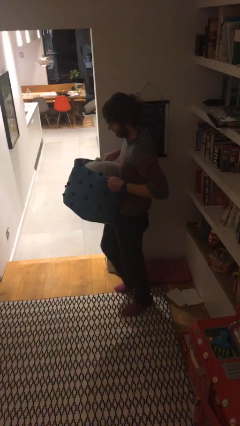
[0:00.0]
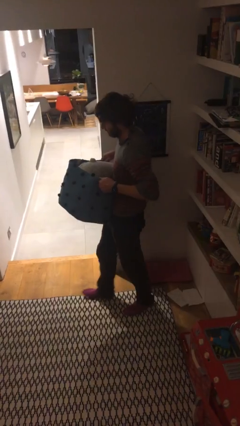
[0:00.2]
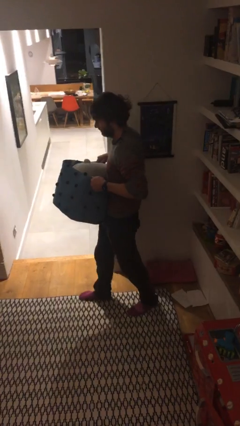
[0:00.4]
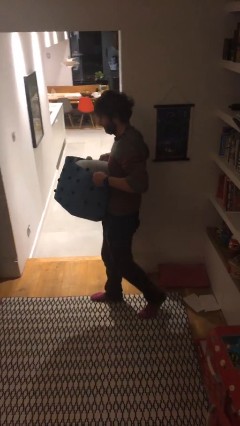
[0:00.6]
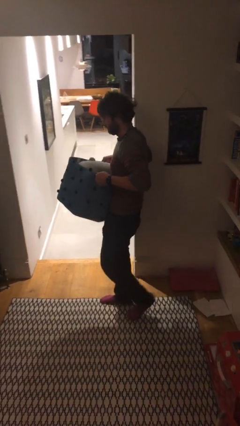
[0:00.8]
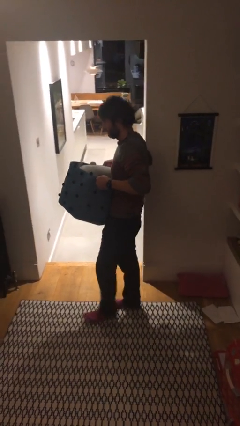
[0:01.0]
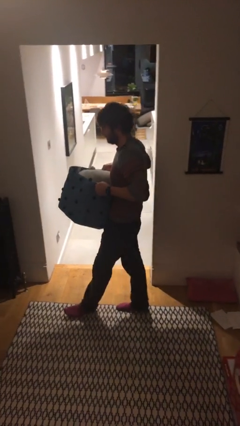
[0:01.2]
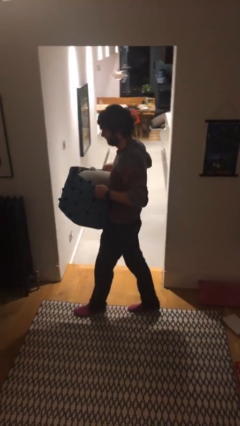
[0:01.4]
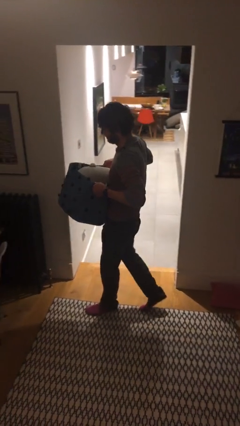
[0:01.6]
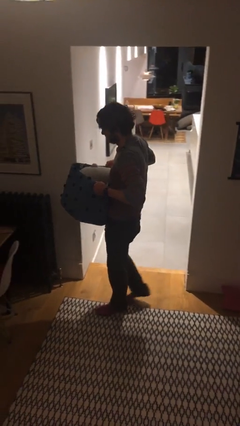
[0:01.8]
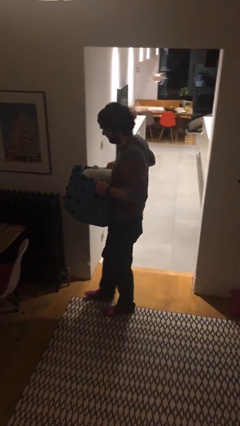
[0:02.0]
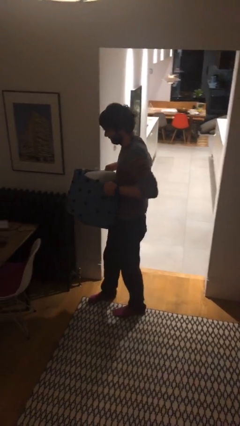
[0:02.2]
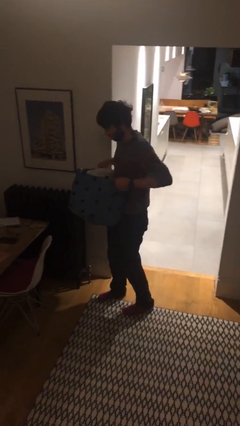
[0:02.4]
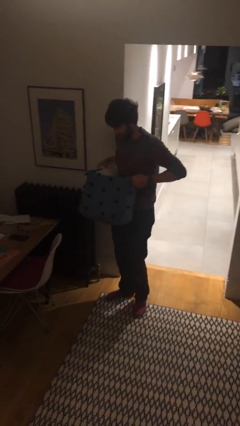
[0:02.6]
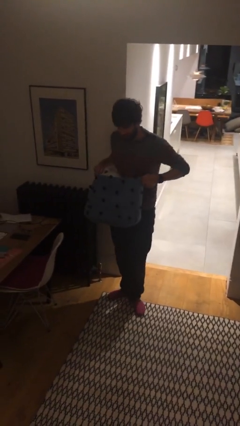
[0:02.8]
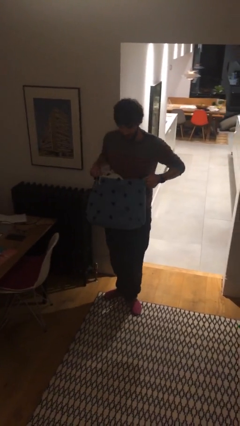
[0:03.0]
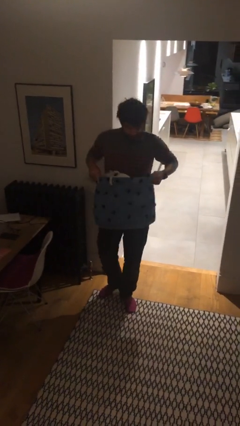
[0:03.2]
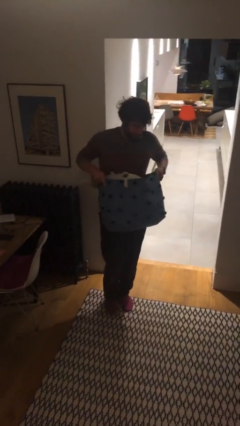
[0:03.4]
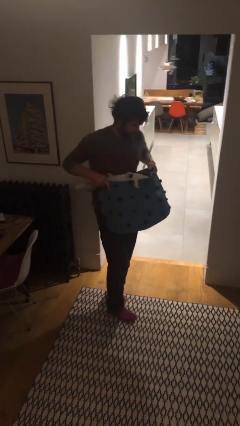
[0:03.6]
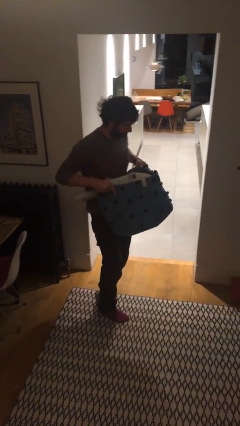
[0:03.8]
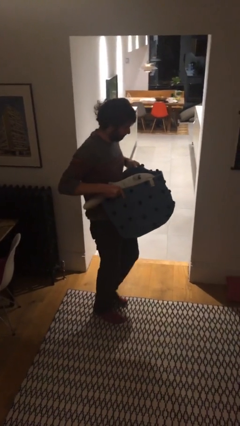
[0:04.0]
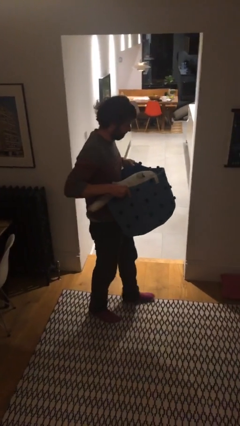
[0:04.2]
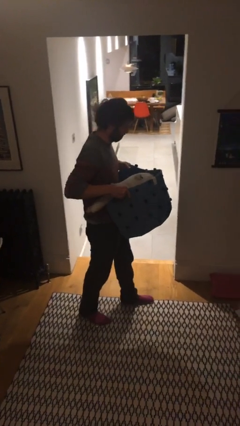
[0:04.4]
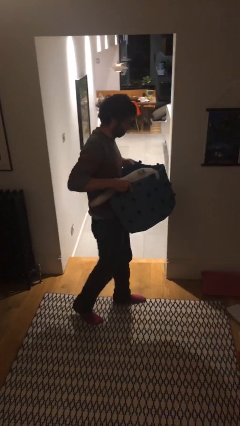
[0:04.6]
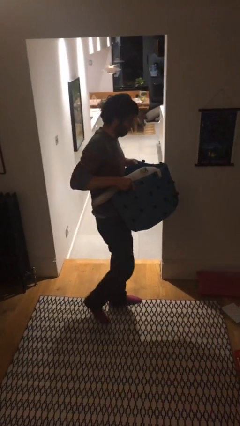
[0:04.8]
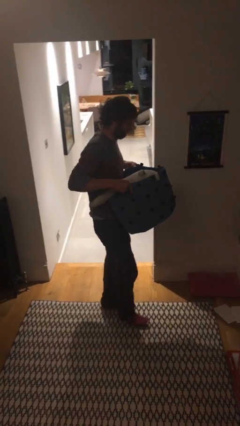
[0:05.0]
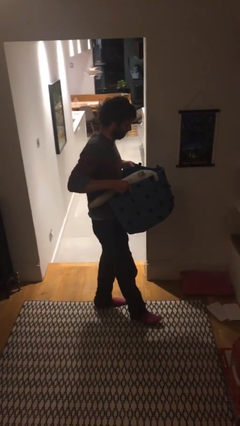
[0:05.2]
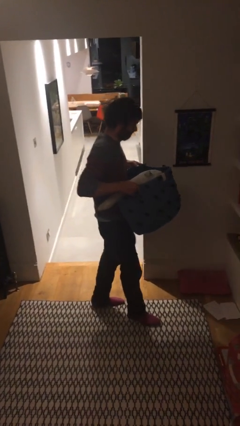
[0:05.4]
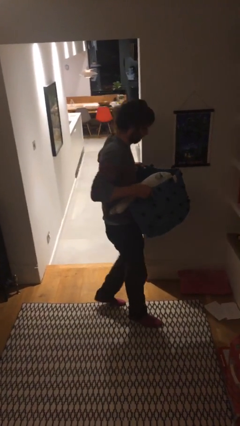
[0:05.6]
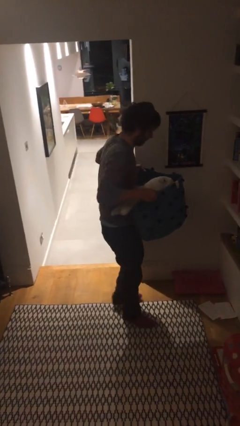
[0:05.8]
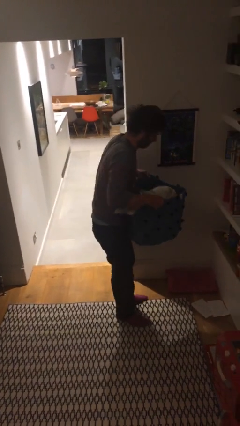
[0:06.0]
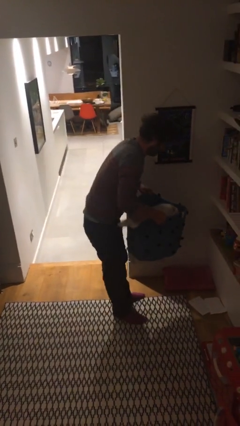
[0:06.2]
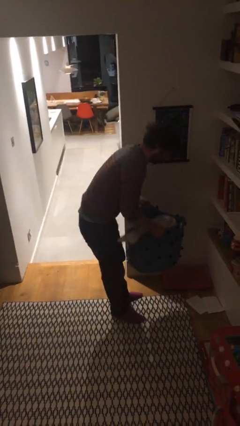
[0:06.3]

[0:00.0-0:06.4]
person carries heavy object

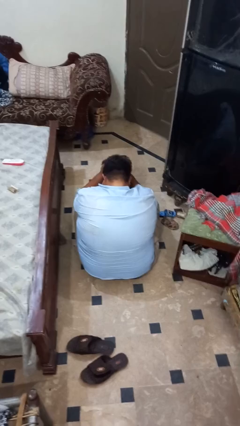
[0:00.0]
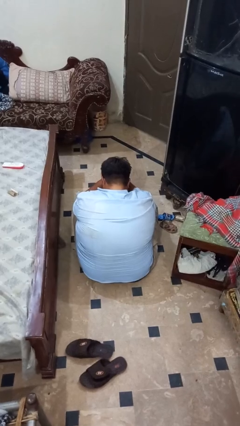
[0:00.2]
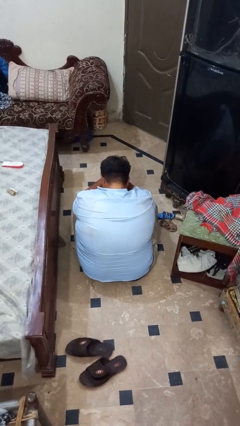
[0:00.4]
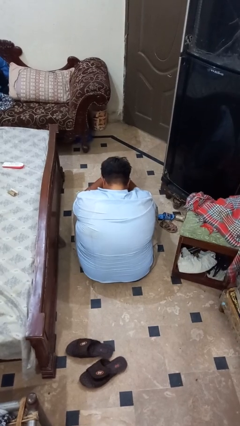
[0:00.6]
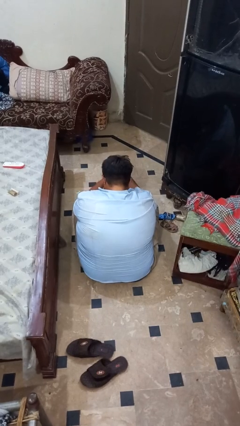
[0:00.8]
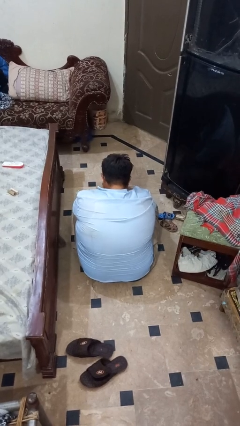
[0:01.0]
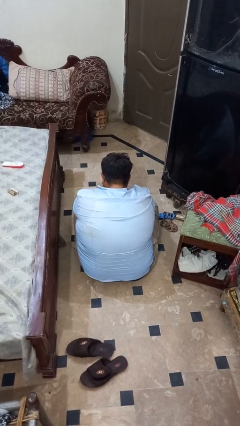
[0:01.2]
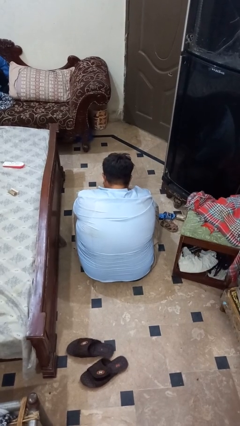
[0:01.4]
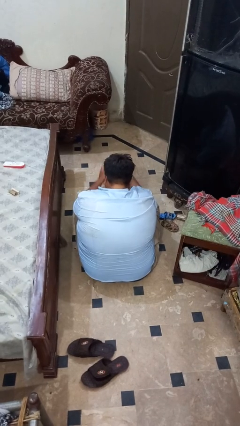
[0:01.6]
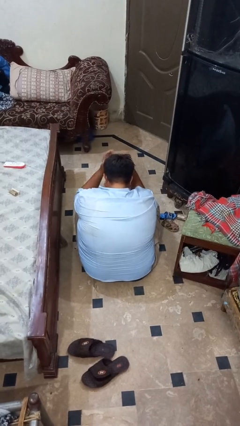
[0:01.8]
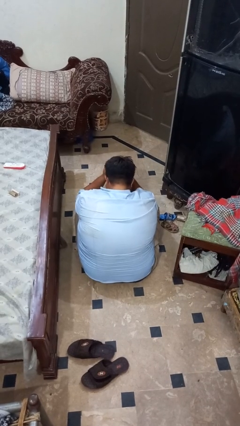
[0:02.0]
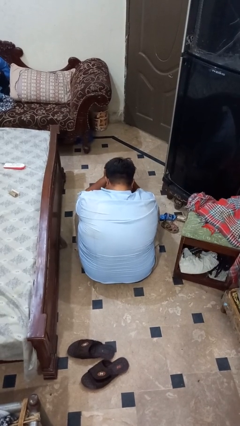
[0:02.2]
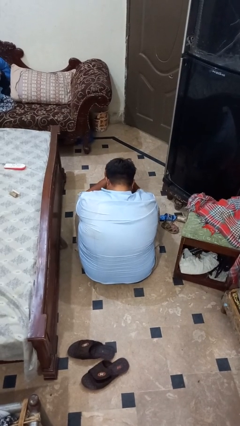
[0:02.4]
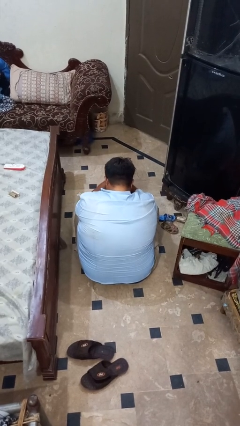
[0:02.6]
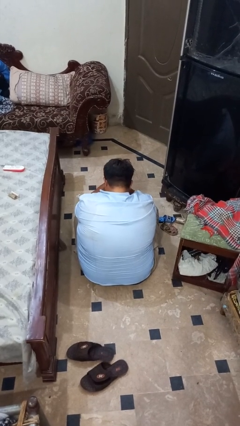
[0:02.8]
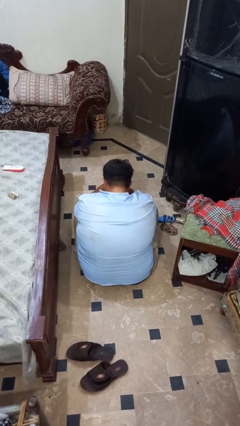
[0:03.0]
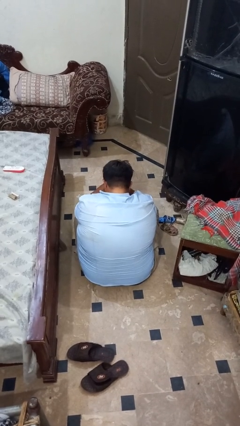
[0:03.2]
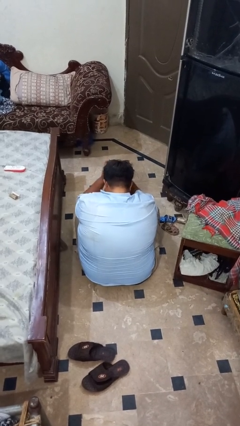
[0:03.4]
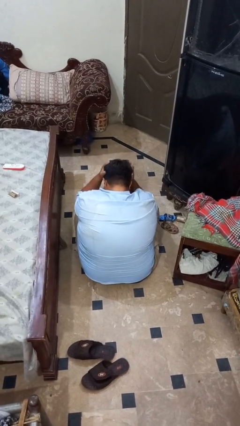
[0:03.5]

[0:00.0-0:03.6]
person strokes hair

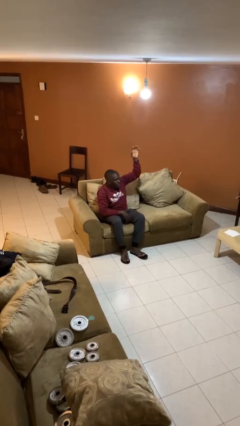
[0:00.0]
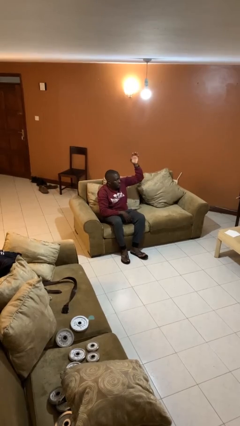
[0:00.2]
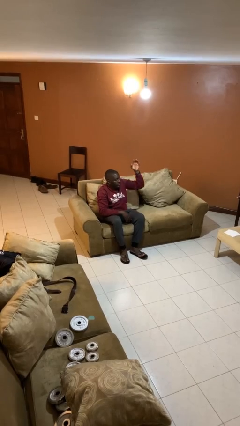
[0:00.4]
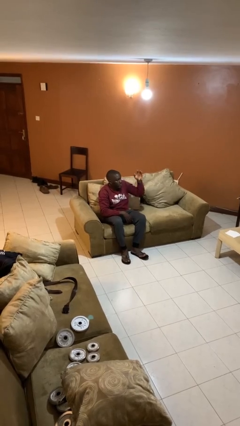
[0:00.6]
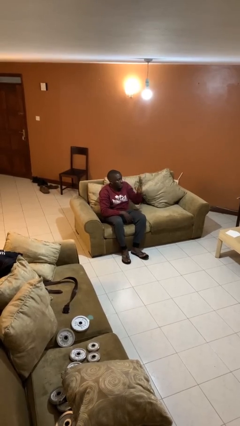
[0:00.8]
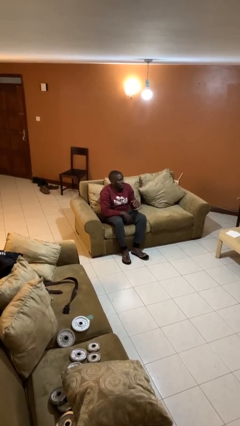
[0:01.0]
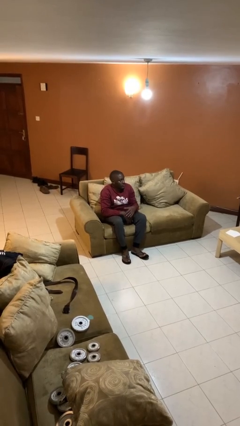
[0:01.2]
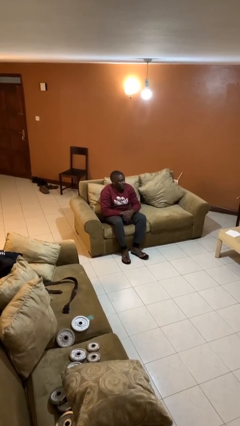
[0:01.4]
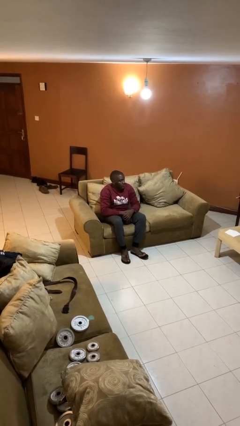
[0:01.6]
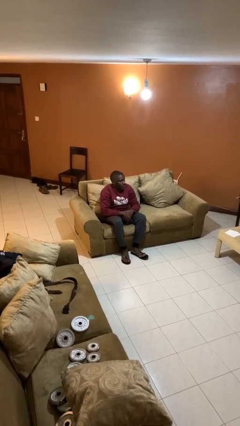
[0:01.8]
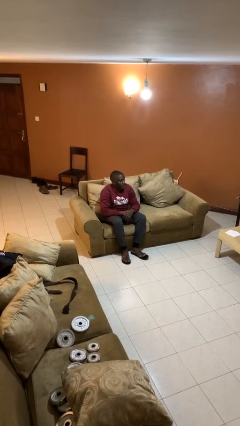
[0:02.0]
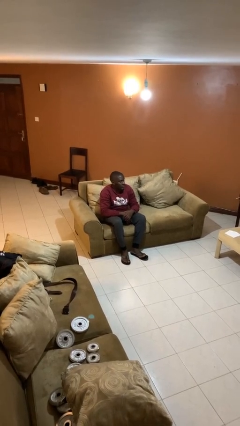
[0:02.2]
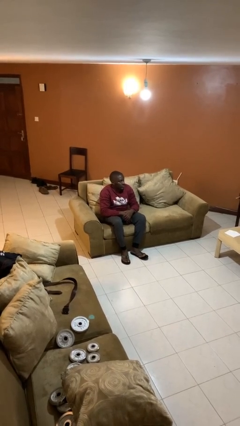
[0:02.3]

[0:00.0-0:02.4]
person gestures lower hand

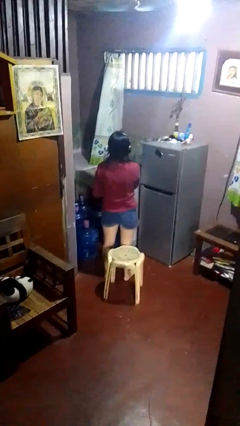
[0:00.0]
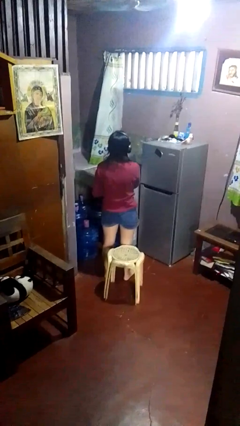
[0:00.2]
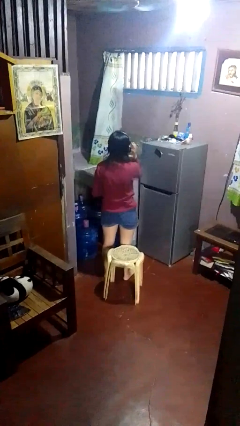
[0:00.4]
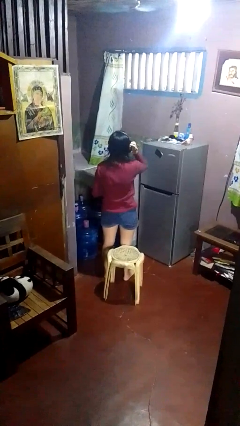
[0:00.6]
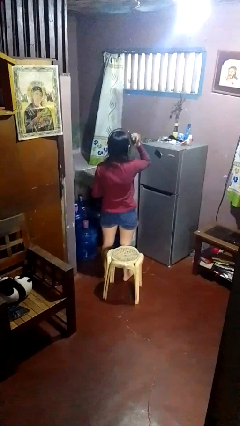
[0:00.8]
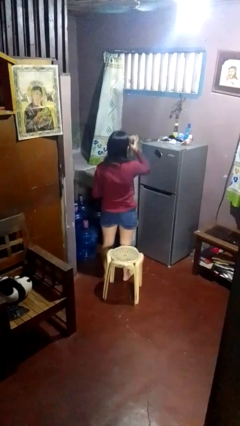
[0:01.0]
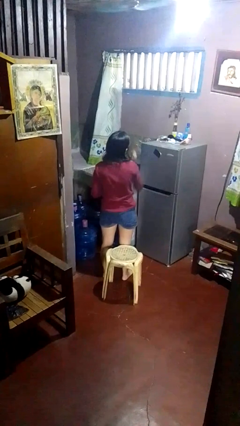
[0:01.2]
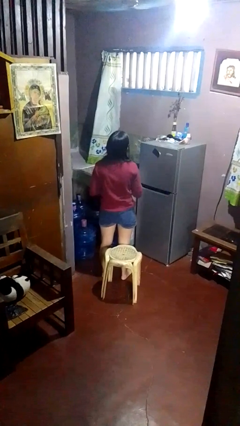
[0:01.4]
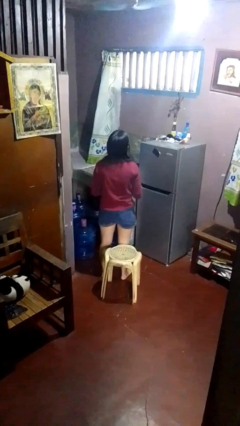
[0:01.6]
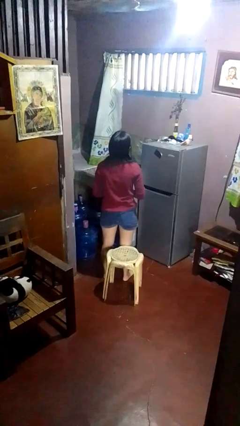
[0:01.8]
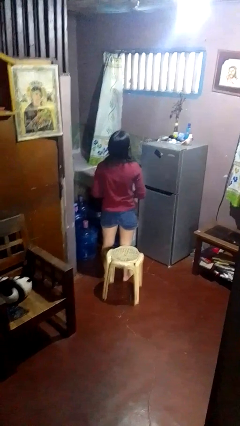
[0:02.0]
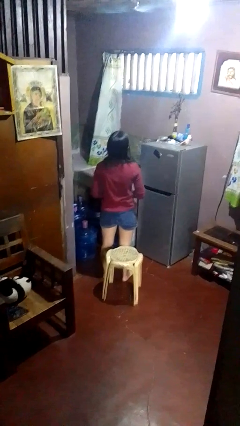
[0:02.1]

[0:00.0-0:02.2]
person takes off headphones

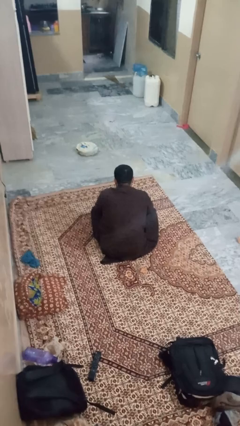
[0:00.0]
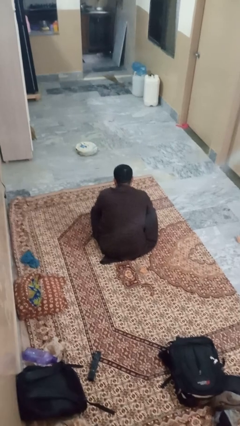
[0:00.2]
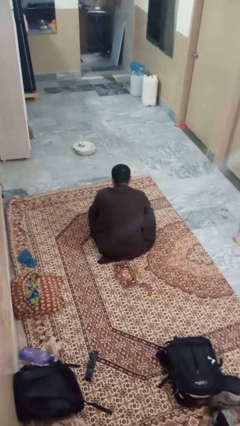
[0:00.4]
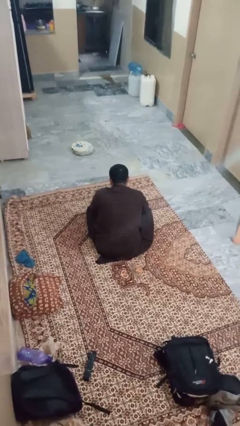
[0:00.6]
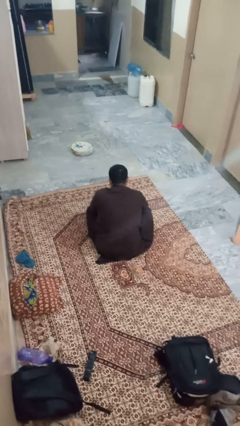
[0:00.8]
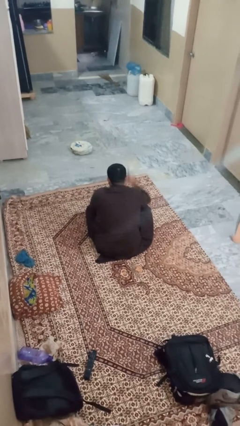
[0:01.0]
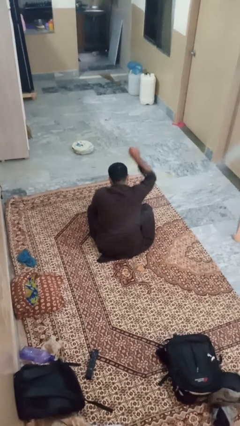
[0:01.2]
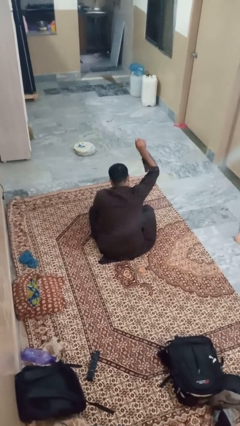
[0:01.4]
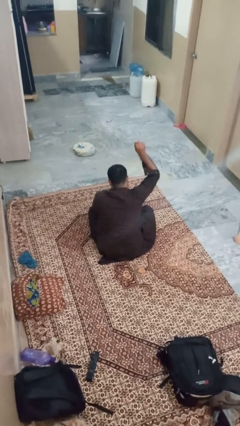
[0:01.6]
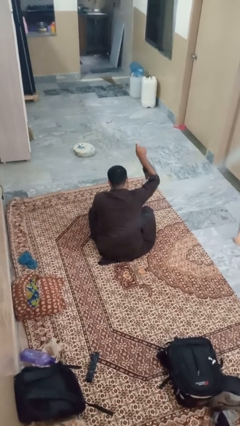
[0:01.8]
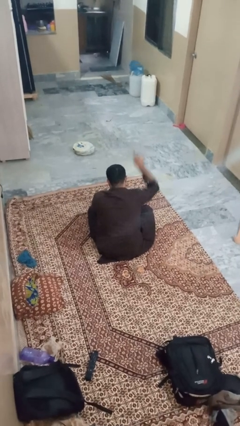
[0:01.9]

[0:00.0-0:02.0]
person gestures number one

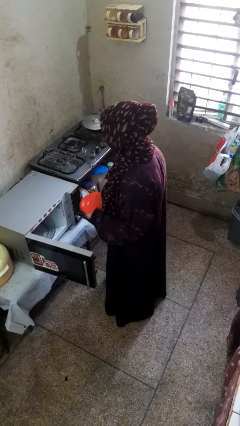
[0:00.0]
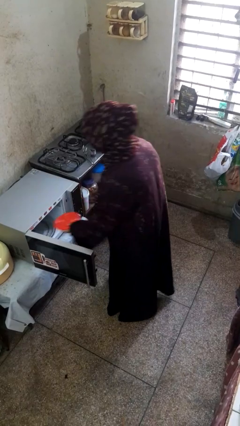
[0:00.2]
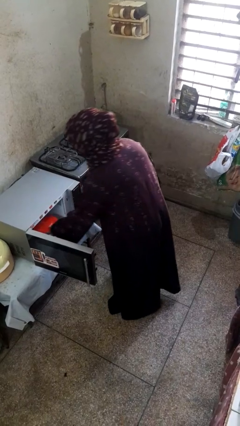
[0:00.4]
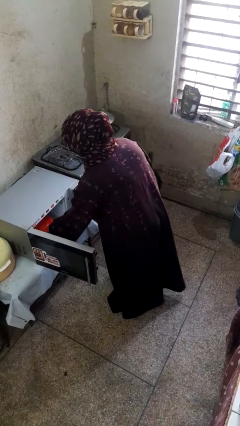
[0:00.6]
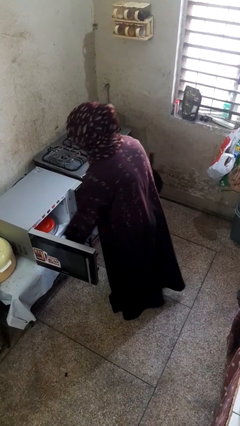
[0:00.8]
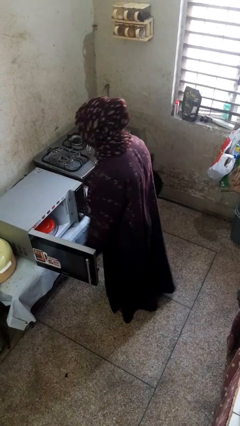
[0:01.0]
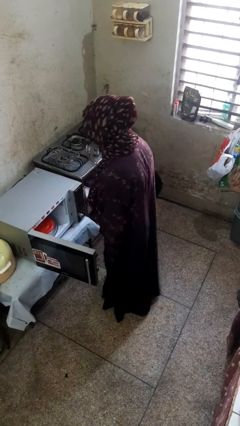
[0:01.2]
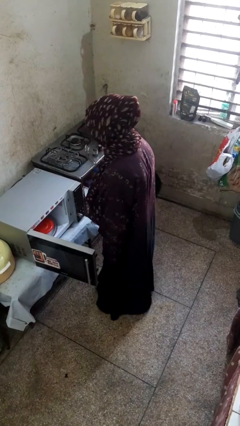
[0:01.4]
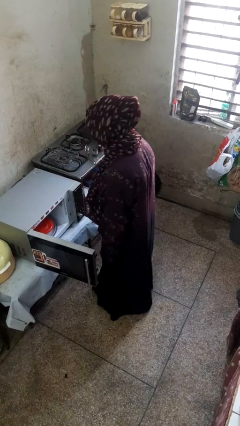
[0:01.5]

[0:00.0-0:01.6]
person puts object into microwave
